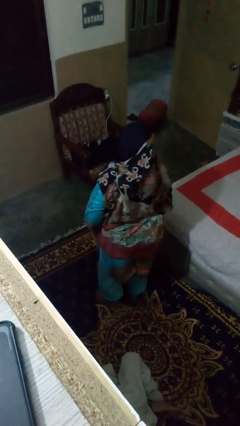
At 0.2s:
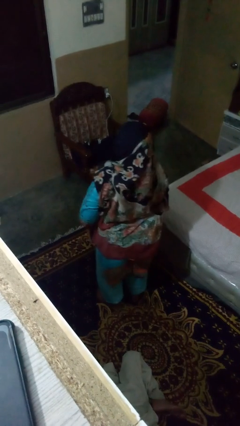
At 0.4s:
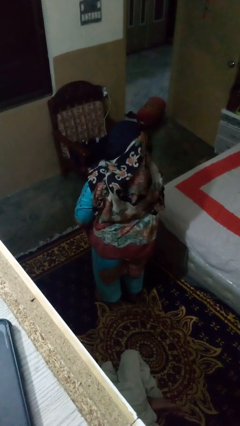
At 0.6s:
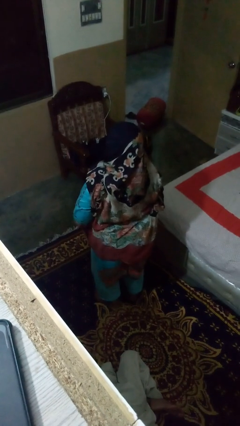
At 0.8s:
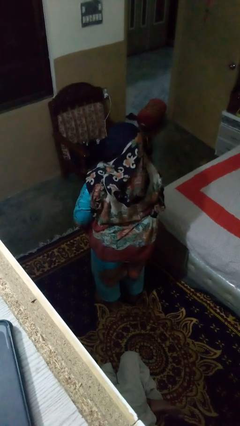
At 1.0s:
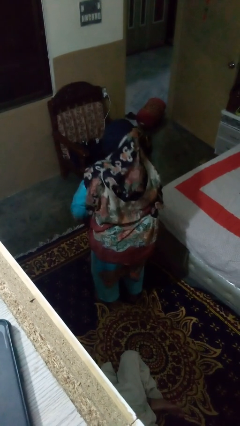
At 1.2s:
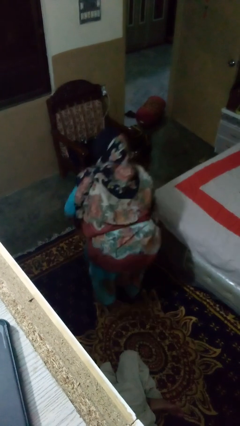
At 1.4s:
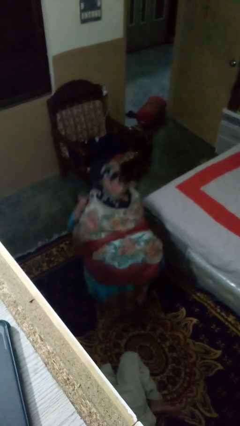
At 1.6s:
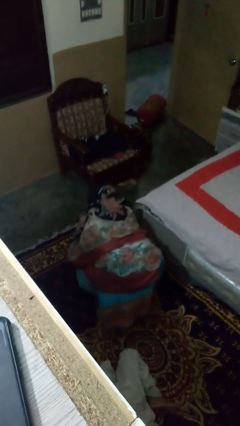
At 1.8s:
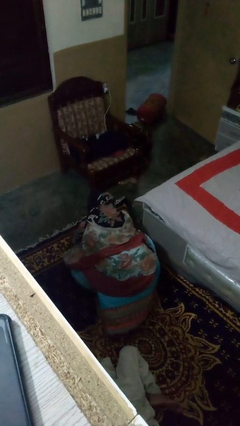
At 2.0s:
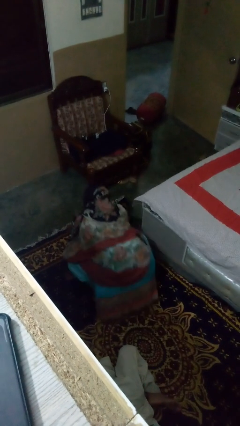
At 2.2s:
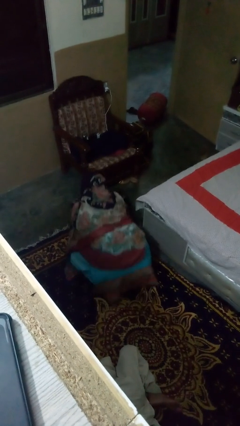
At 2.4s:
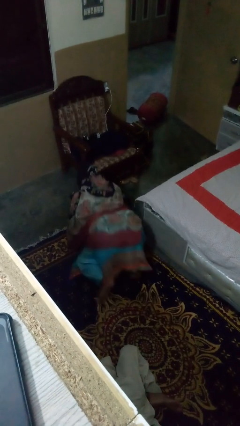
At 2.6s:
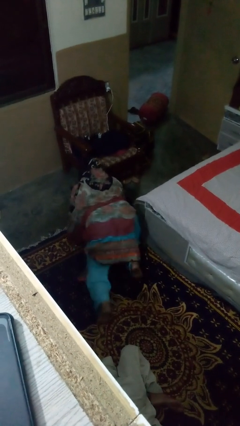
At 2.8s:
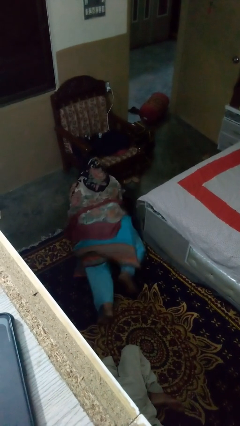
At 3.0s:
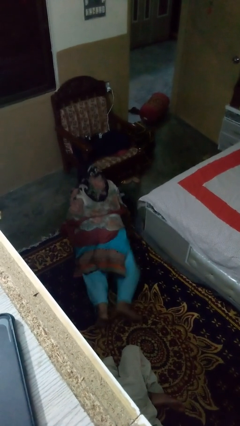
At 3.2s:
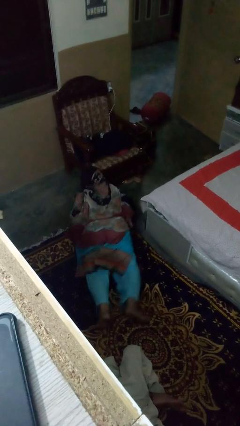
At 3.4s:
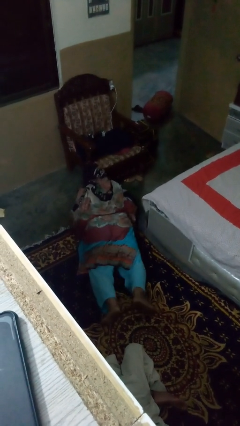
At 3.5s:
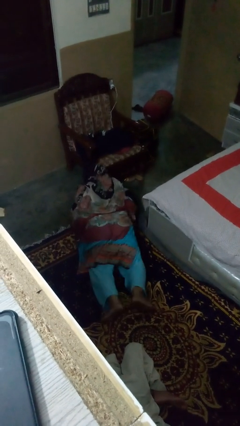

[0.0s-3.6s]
person exercises with pushup

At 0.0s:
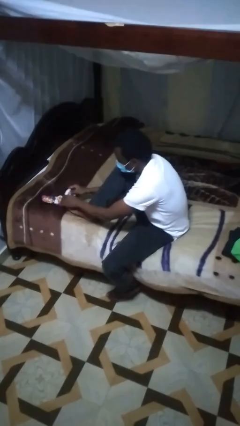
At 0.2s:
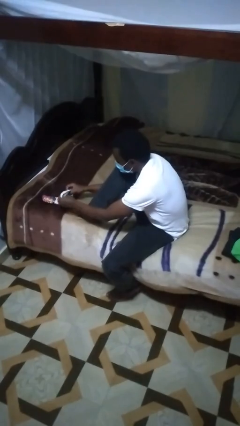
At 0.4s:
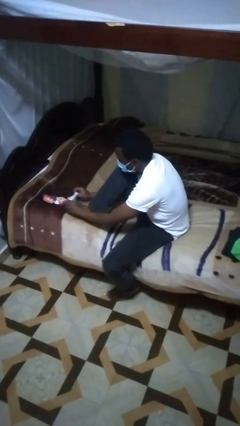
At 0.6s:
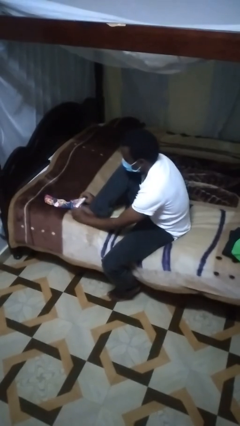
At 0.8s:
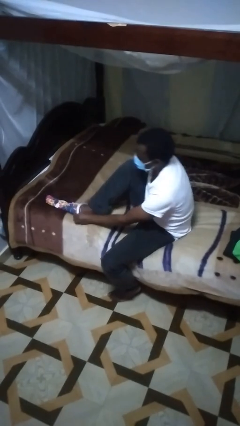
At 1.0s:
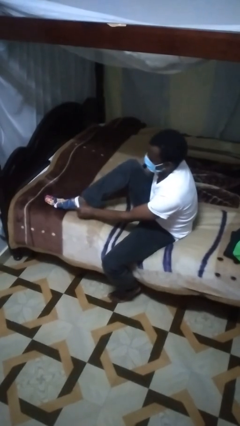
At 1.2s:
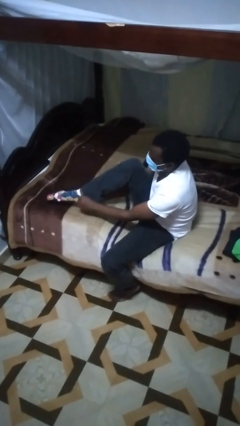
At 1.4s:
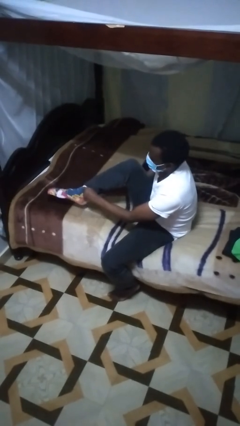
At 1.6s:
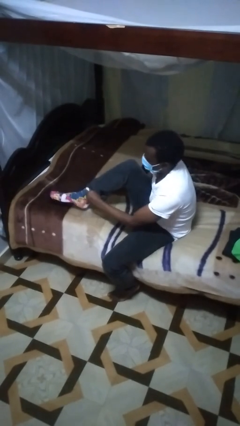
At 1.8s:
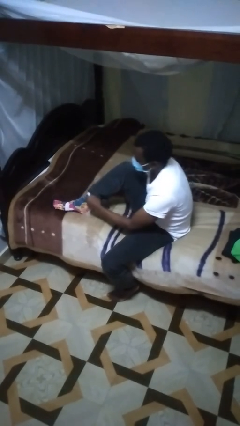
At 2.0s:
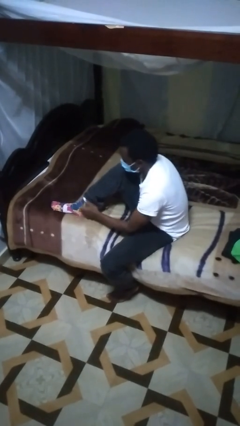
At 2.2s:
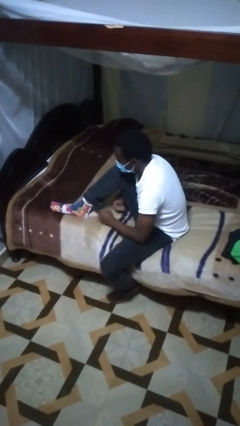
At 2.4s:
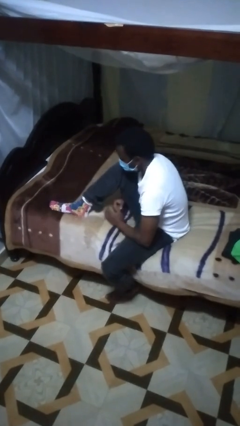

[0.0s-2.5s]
person puts on socks

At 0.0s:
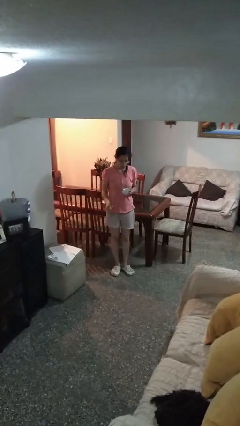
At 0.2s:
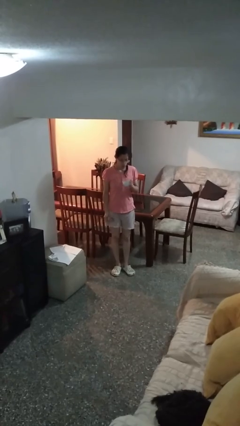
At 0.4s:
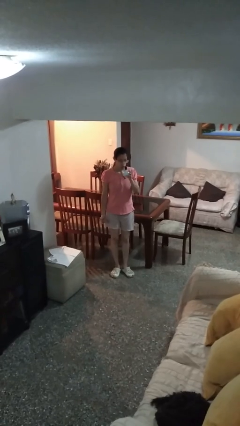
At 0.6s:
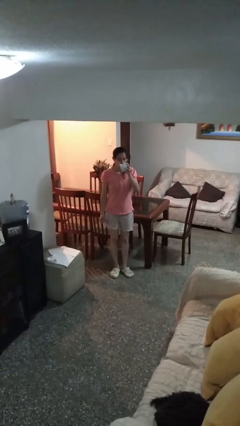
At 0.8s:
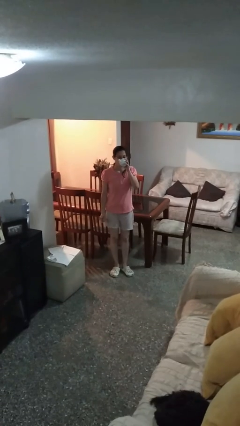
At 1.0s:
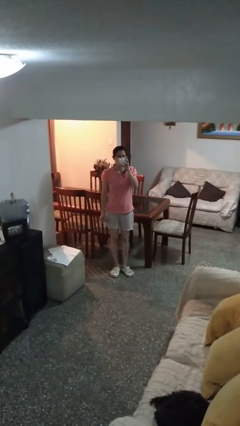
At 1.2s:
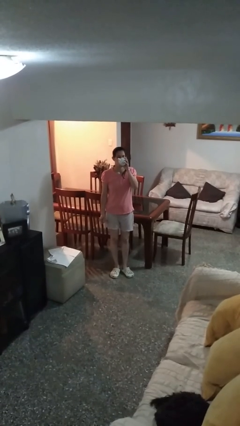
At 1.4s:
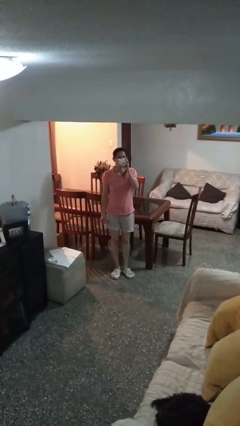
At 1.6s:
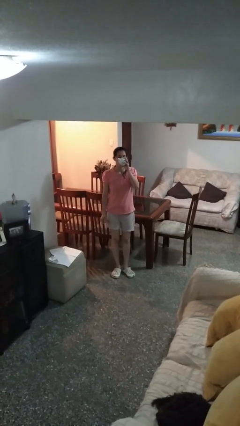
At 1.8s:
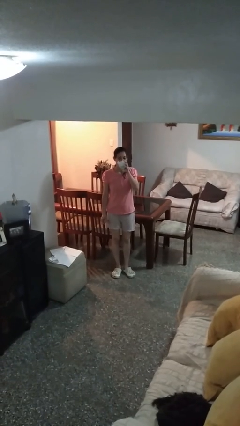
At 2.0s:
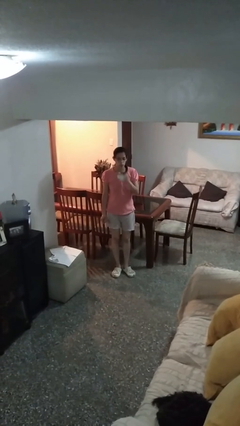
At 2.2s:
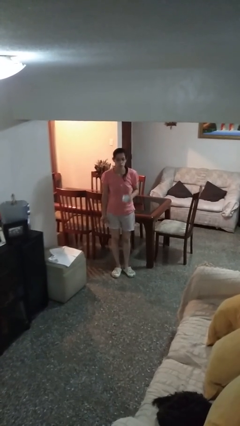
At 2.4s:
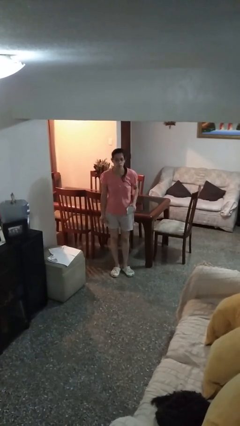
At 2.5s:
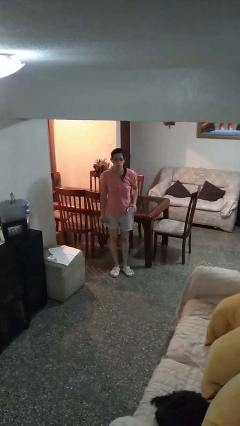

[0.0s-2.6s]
person drinks from mug

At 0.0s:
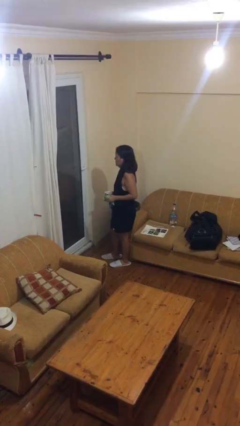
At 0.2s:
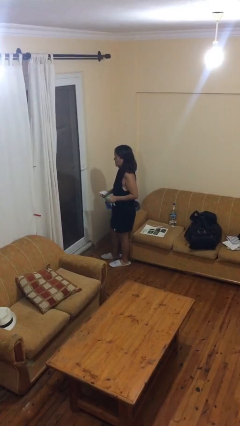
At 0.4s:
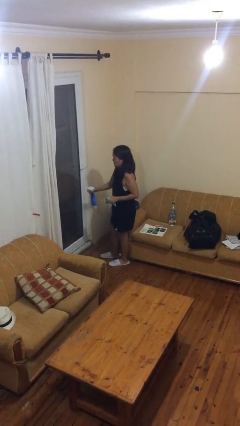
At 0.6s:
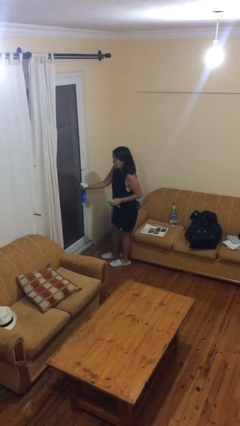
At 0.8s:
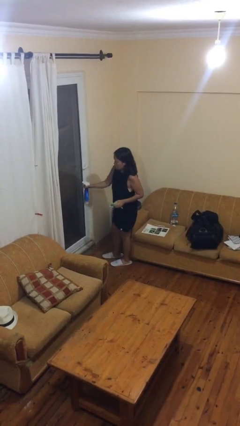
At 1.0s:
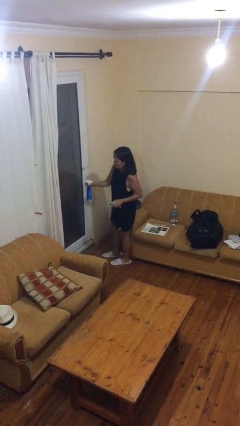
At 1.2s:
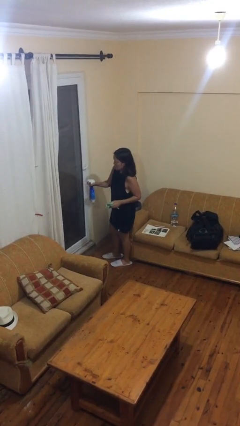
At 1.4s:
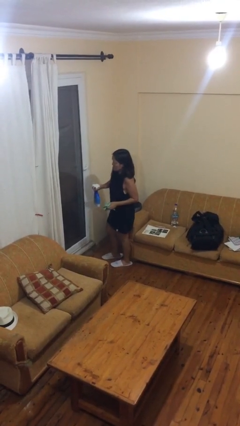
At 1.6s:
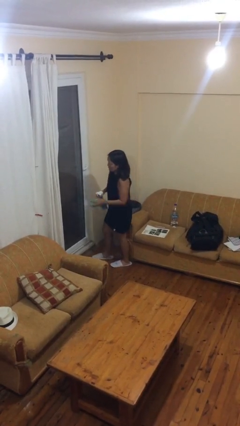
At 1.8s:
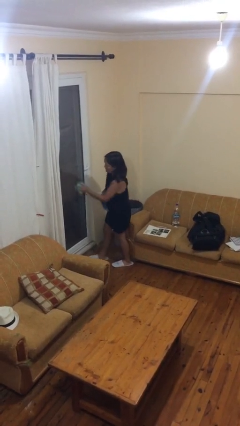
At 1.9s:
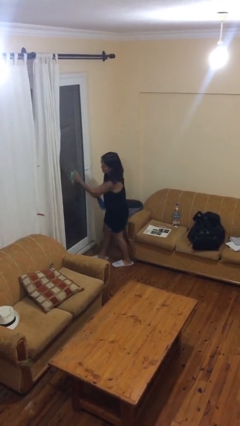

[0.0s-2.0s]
person sprays from bottle

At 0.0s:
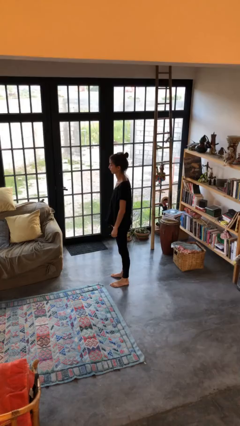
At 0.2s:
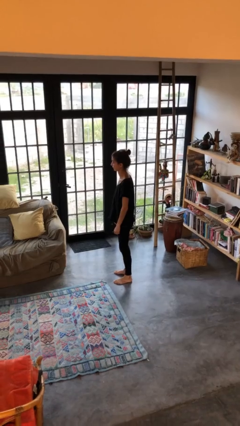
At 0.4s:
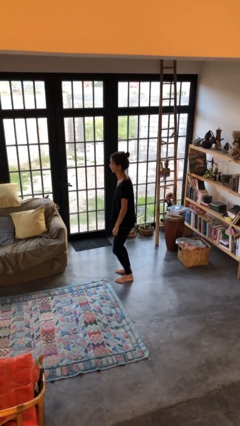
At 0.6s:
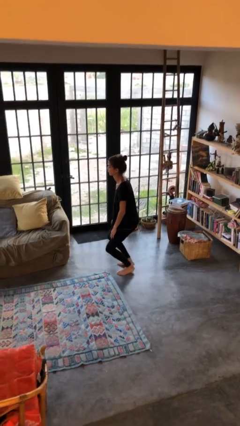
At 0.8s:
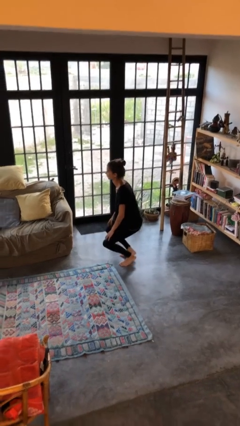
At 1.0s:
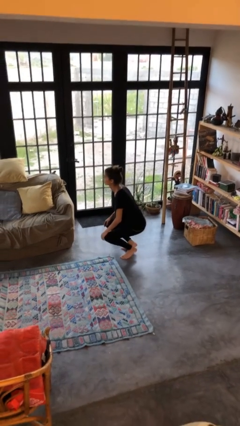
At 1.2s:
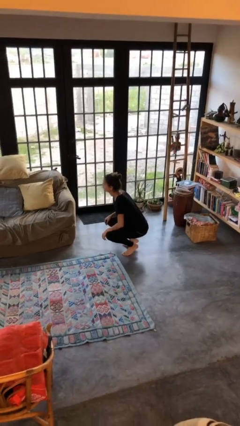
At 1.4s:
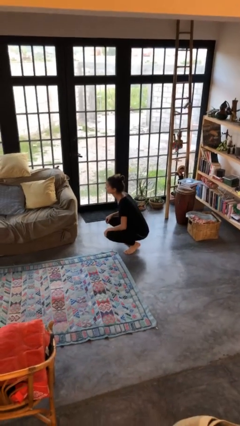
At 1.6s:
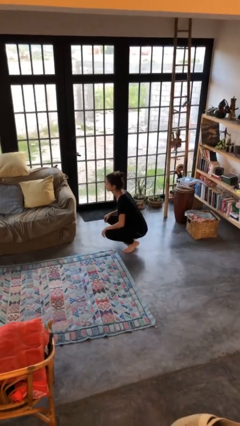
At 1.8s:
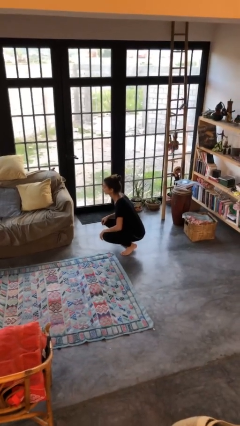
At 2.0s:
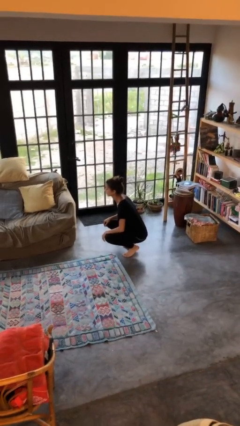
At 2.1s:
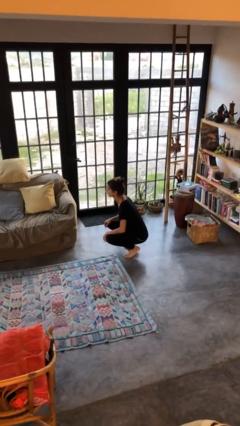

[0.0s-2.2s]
person squats

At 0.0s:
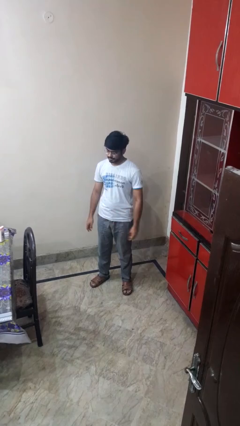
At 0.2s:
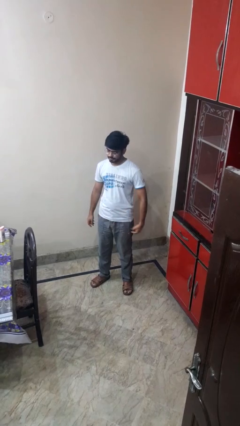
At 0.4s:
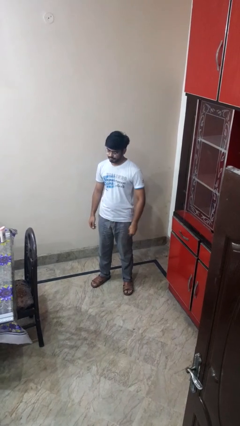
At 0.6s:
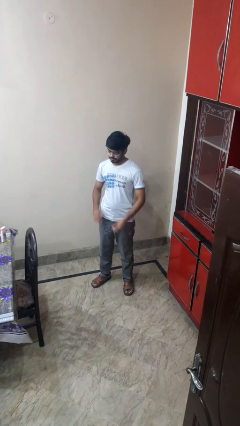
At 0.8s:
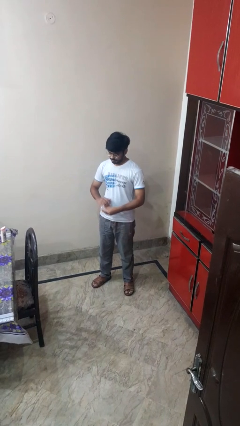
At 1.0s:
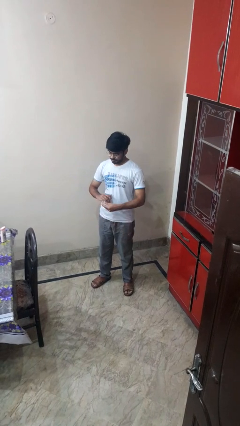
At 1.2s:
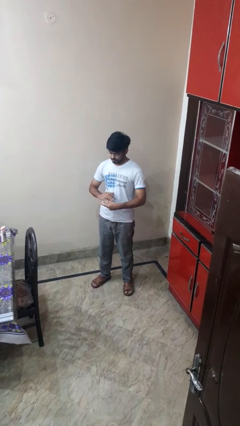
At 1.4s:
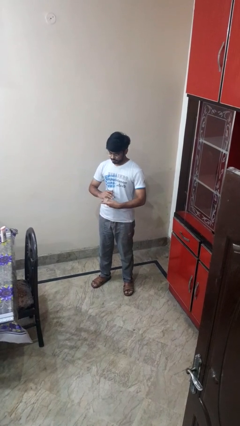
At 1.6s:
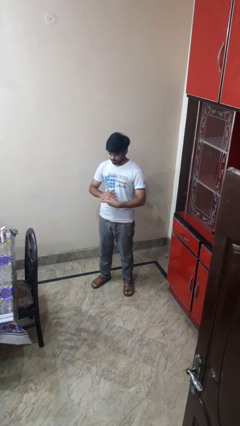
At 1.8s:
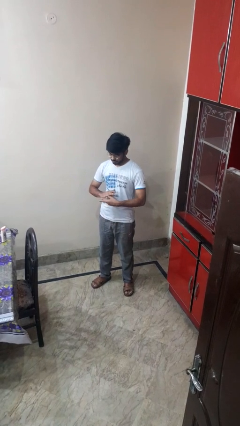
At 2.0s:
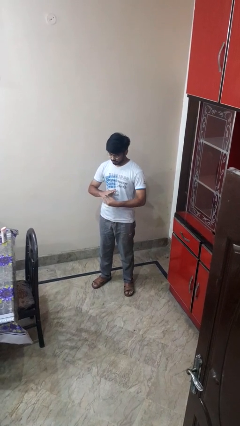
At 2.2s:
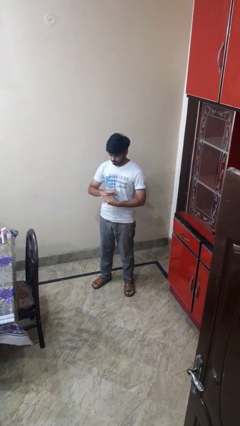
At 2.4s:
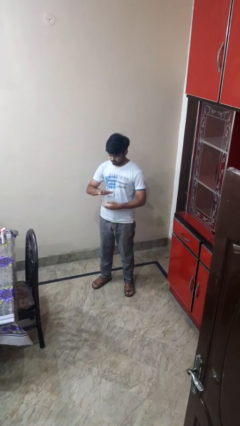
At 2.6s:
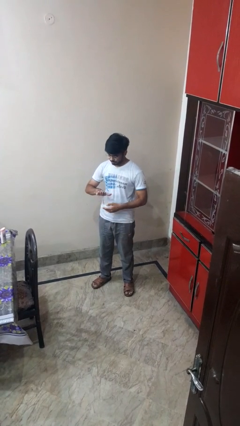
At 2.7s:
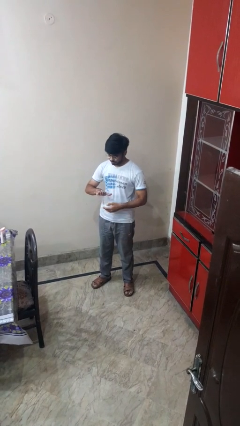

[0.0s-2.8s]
person puts on ring

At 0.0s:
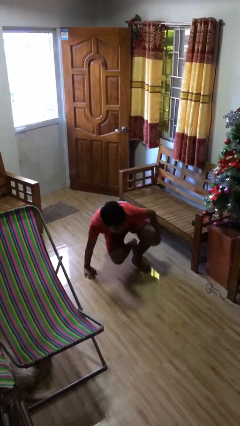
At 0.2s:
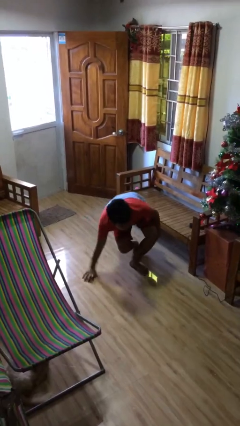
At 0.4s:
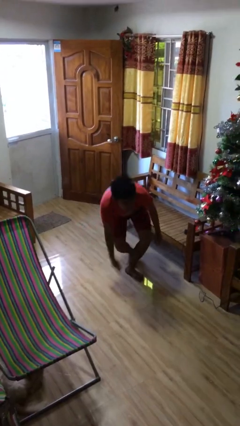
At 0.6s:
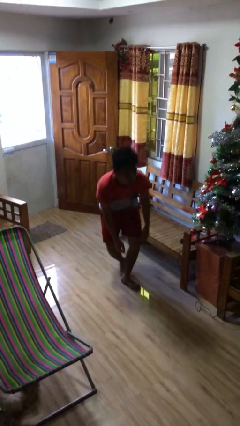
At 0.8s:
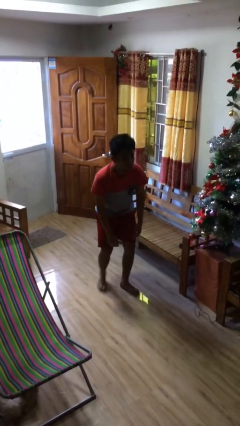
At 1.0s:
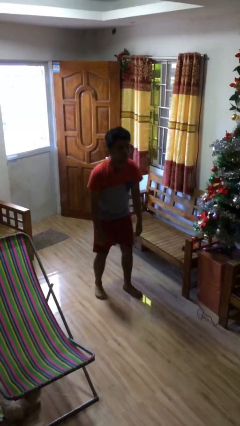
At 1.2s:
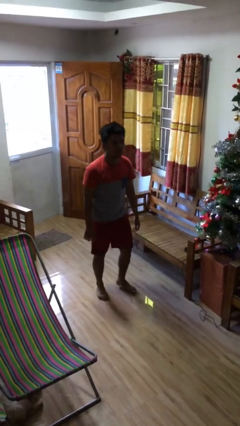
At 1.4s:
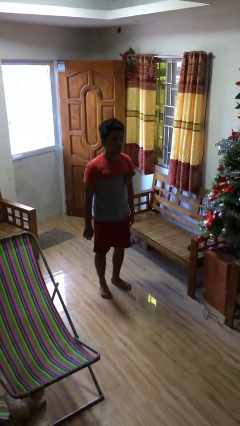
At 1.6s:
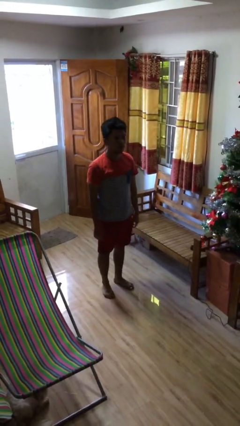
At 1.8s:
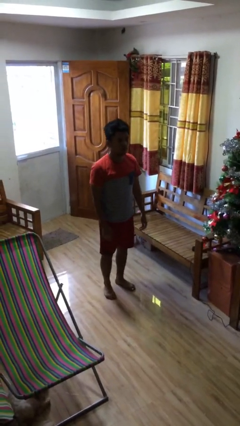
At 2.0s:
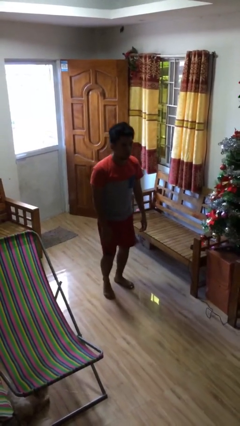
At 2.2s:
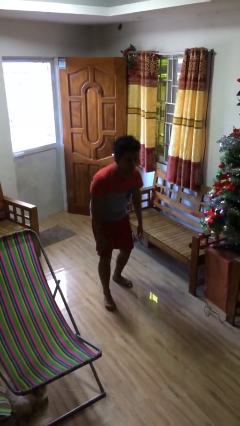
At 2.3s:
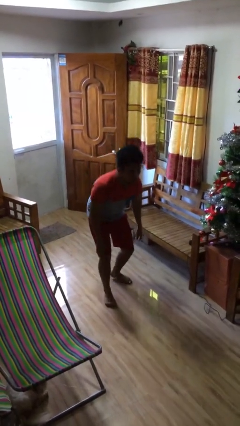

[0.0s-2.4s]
person stands up
